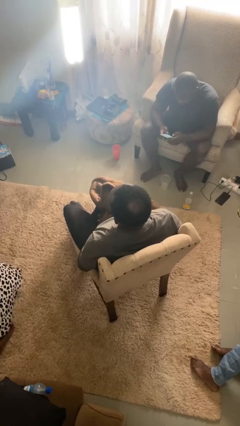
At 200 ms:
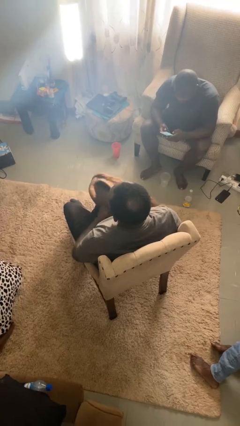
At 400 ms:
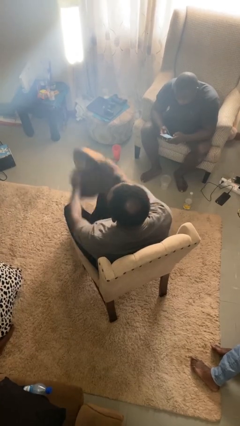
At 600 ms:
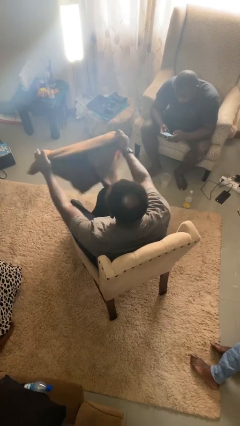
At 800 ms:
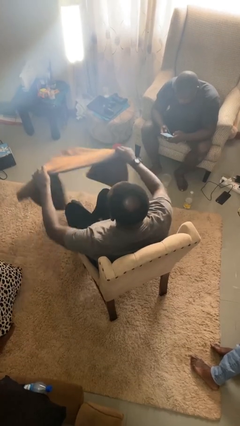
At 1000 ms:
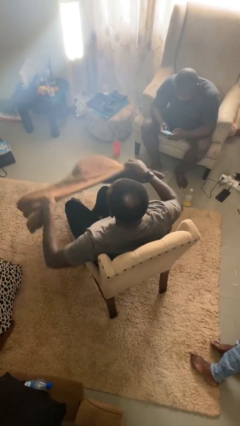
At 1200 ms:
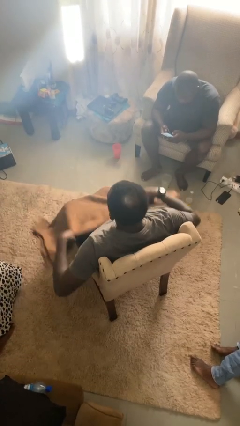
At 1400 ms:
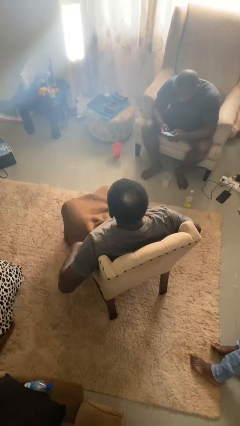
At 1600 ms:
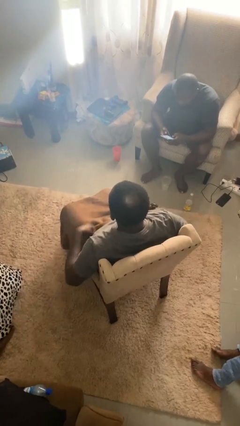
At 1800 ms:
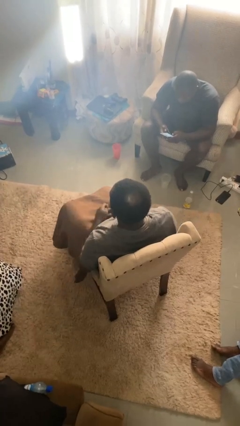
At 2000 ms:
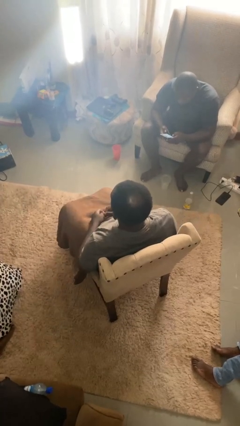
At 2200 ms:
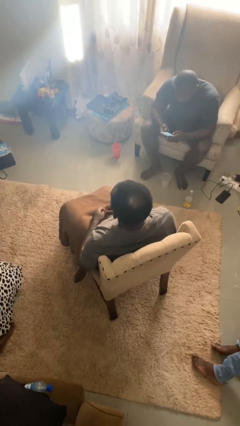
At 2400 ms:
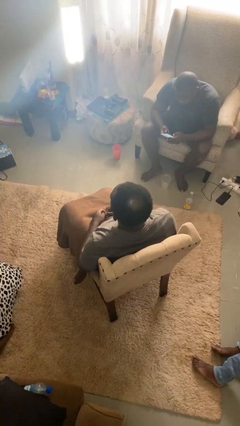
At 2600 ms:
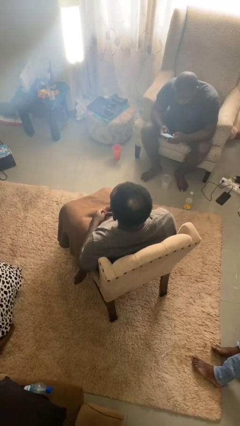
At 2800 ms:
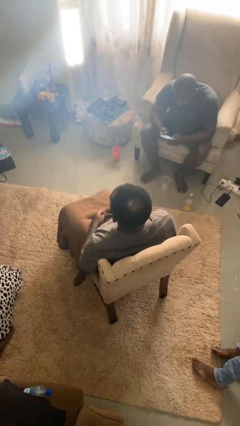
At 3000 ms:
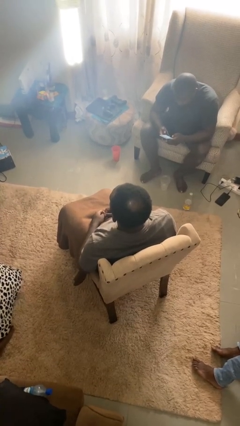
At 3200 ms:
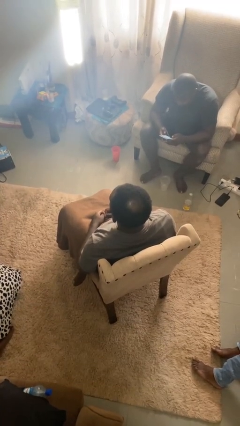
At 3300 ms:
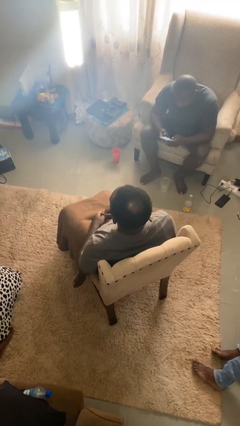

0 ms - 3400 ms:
person covers with blanket

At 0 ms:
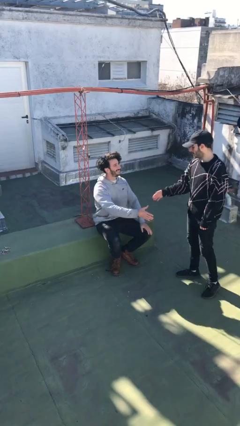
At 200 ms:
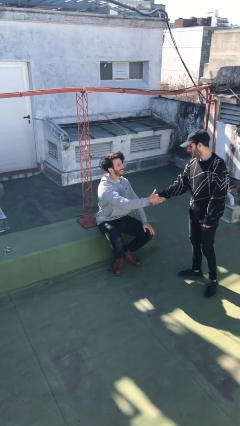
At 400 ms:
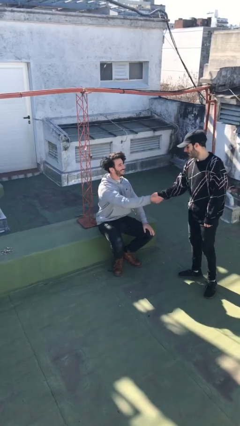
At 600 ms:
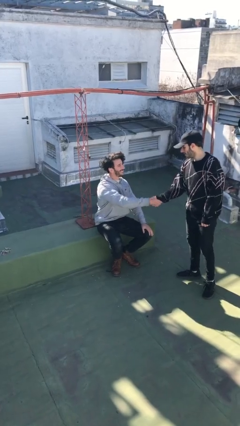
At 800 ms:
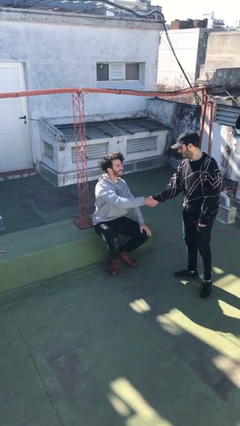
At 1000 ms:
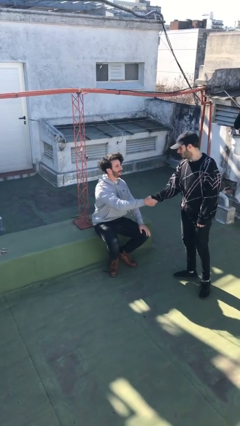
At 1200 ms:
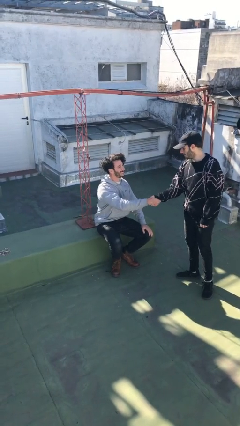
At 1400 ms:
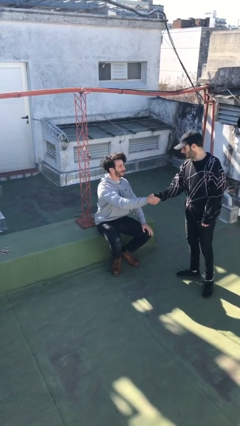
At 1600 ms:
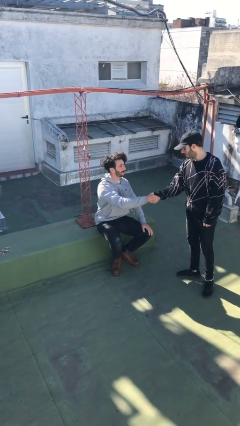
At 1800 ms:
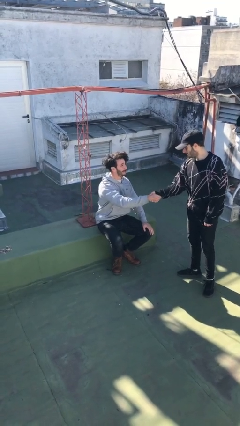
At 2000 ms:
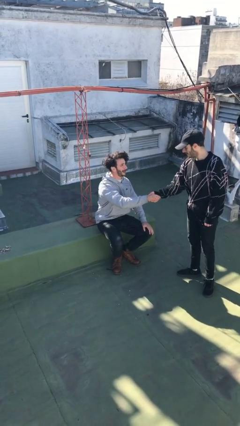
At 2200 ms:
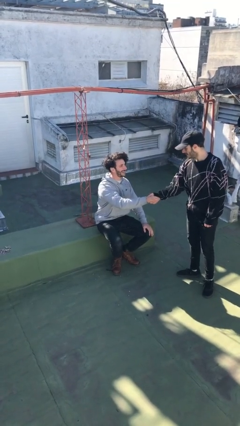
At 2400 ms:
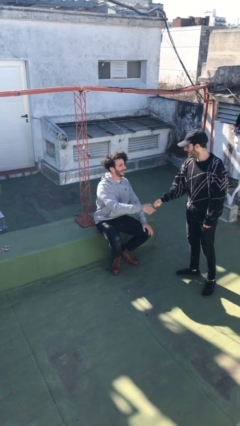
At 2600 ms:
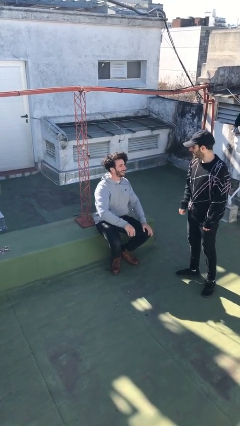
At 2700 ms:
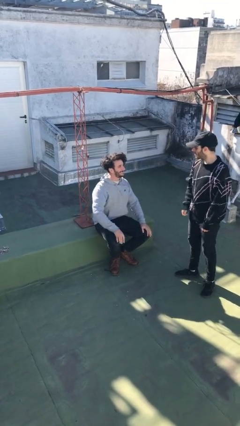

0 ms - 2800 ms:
person shakes hand

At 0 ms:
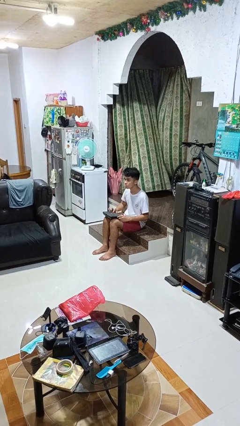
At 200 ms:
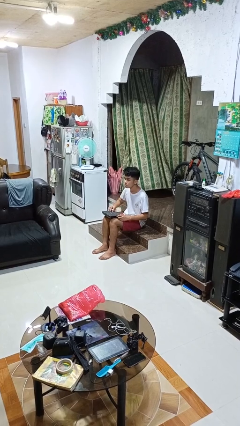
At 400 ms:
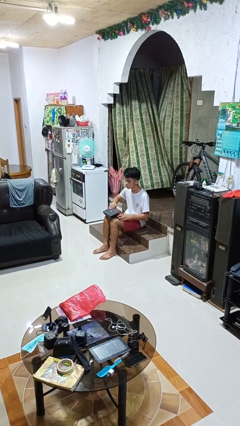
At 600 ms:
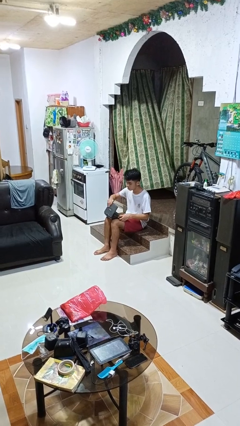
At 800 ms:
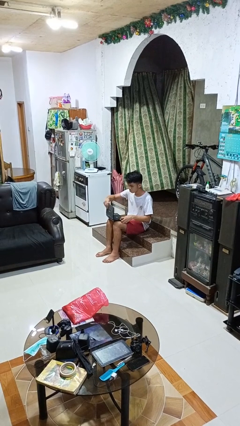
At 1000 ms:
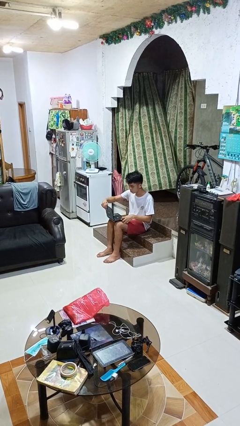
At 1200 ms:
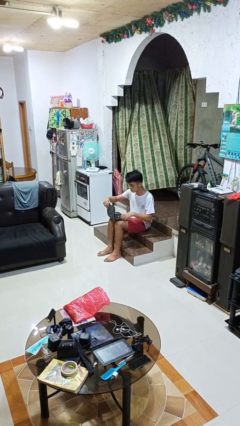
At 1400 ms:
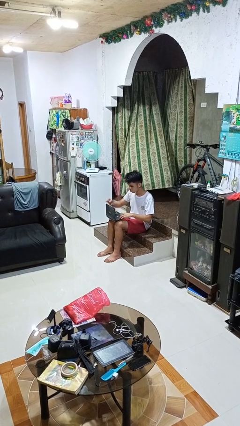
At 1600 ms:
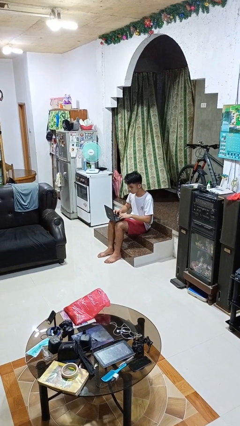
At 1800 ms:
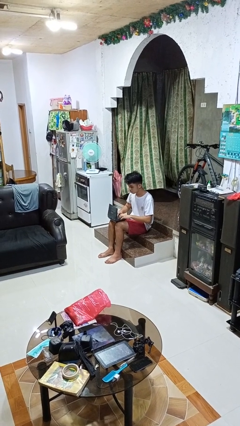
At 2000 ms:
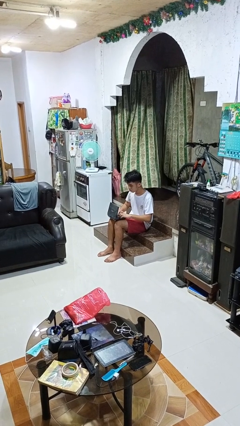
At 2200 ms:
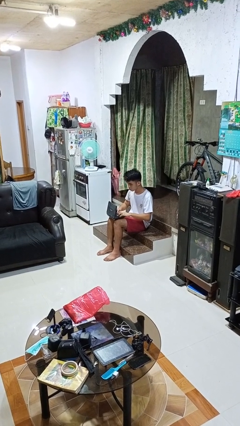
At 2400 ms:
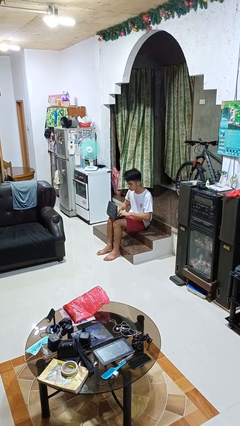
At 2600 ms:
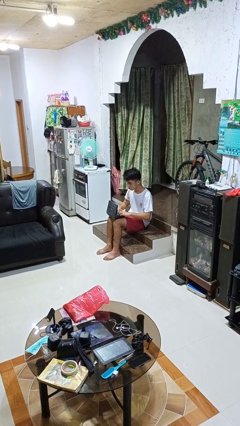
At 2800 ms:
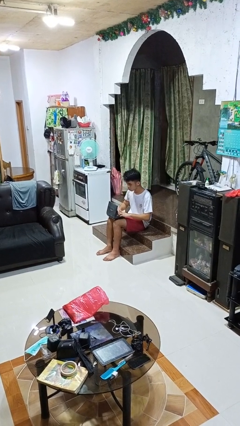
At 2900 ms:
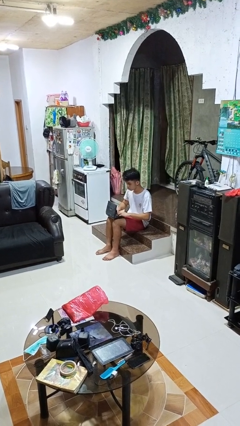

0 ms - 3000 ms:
person opens laptop

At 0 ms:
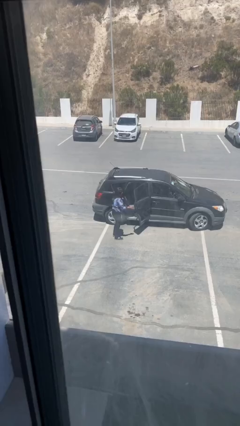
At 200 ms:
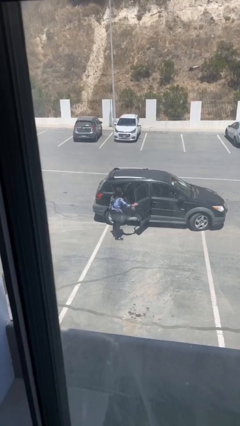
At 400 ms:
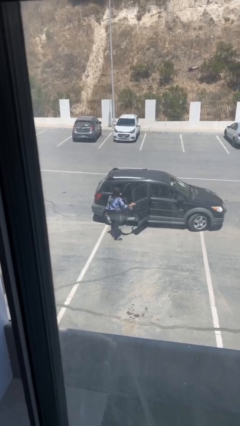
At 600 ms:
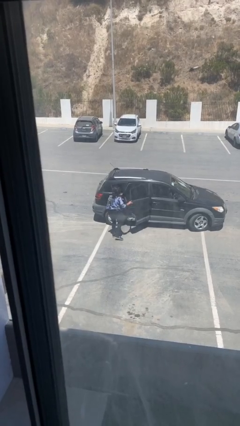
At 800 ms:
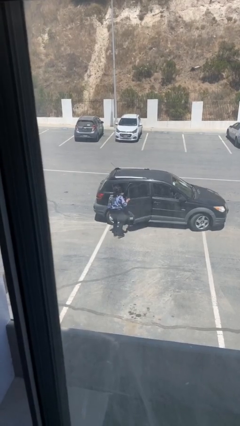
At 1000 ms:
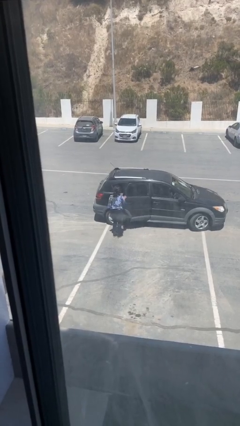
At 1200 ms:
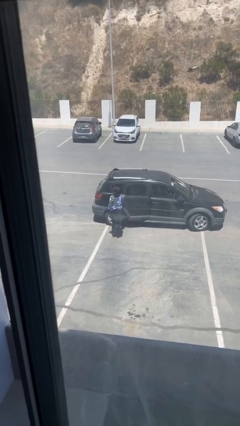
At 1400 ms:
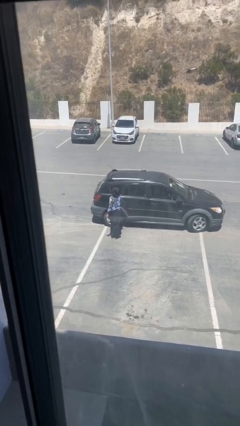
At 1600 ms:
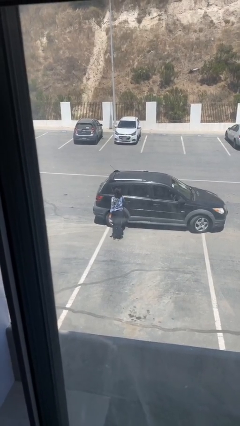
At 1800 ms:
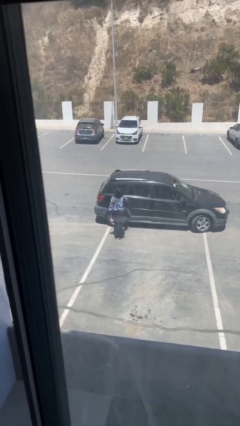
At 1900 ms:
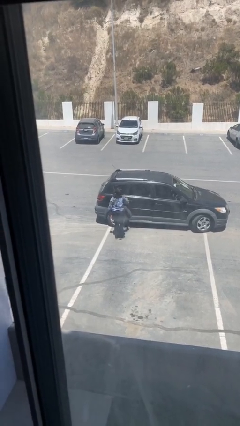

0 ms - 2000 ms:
person closes car door

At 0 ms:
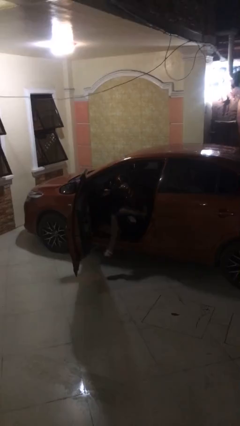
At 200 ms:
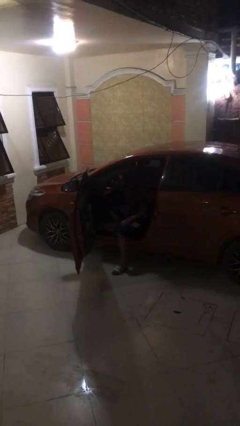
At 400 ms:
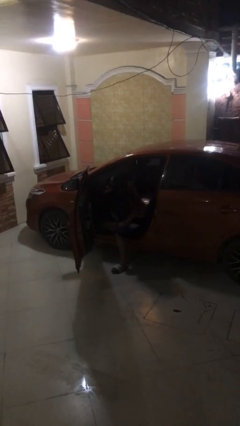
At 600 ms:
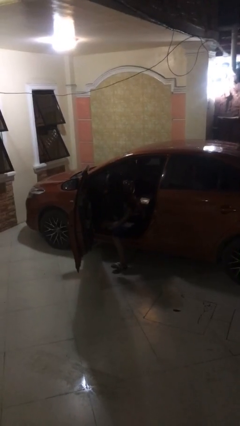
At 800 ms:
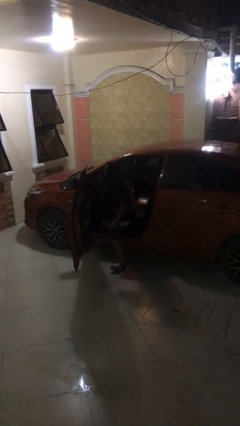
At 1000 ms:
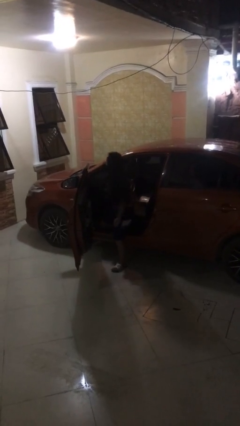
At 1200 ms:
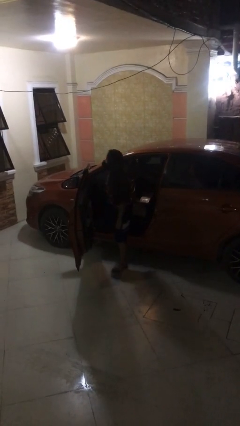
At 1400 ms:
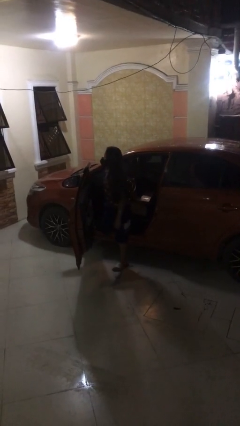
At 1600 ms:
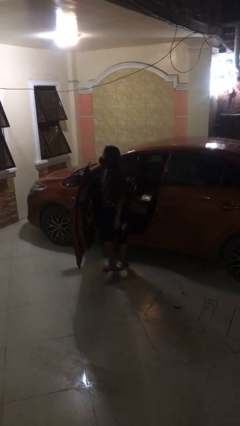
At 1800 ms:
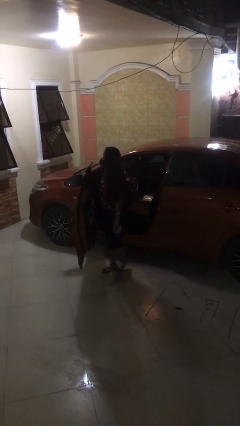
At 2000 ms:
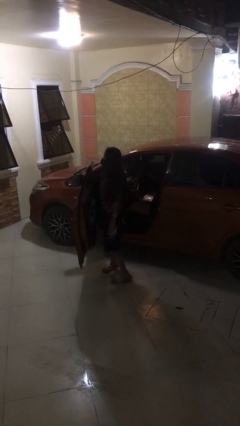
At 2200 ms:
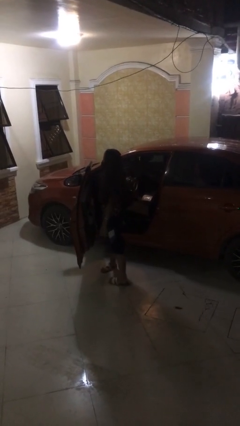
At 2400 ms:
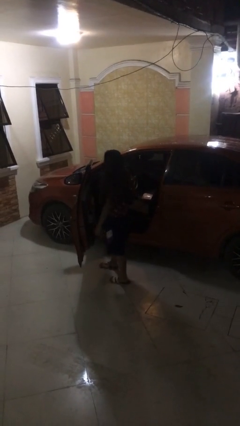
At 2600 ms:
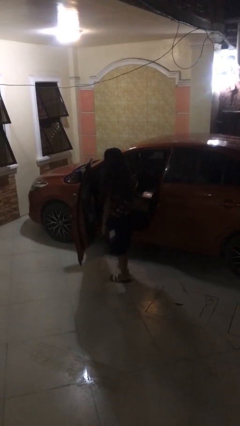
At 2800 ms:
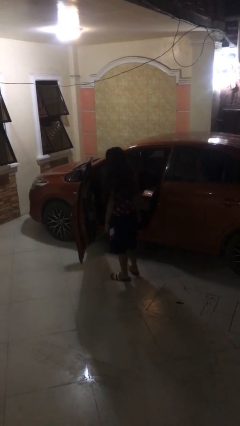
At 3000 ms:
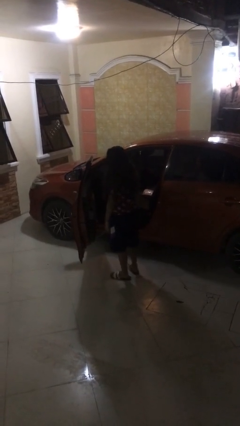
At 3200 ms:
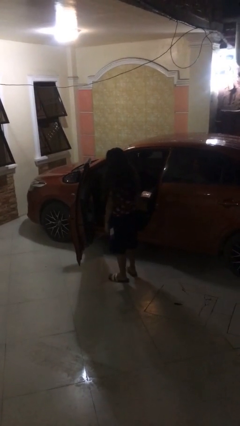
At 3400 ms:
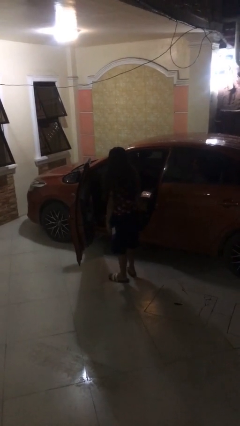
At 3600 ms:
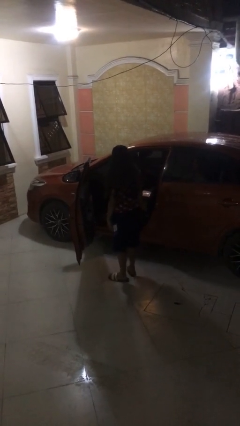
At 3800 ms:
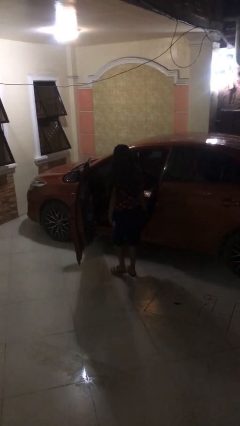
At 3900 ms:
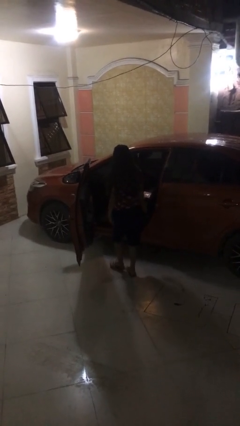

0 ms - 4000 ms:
person exits car

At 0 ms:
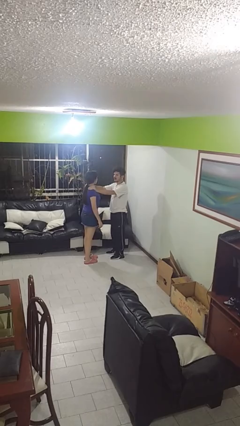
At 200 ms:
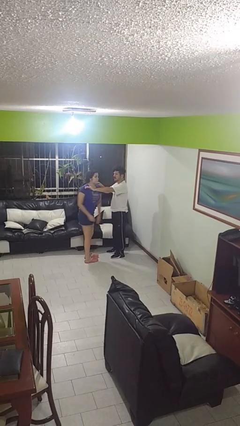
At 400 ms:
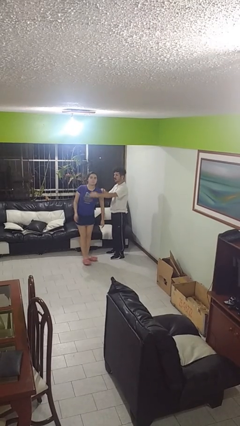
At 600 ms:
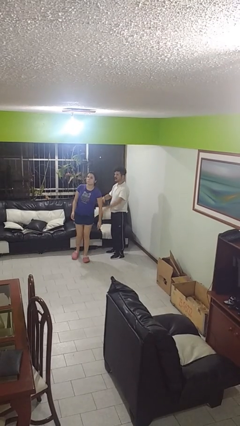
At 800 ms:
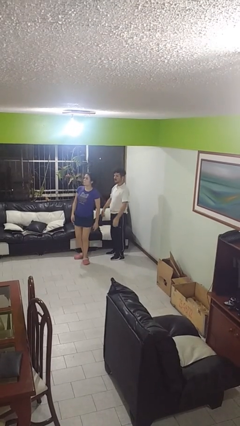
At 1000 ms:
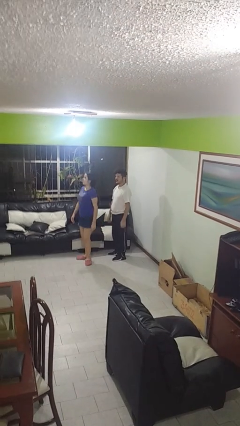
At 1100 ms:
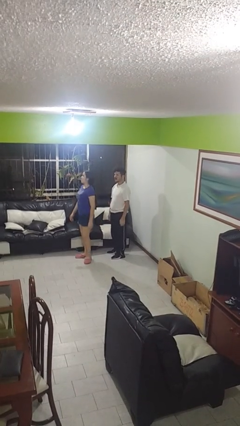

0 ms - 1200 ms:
person spins person around

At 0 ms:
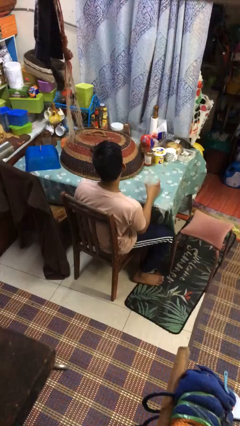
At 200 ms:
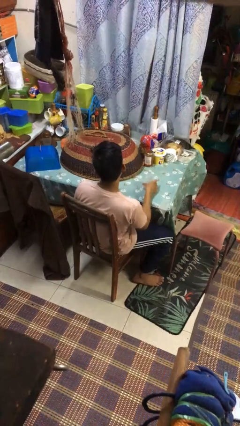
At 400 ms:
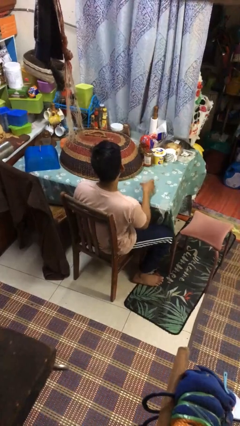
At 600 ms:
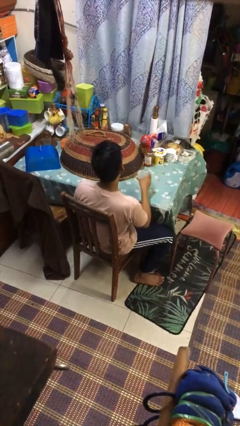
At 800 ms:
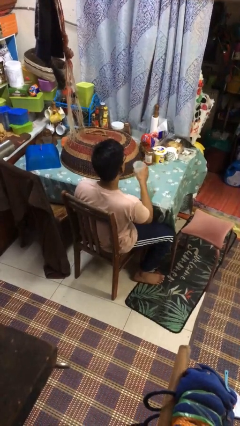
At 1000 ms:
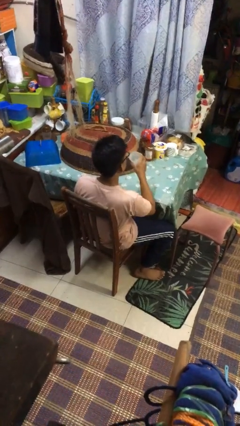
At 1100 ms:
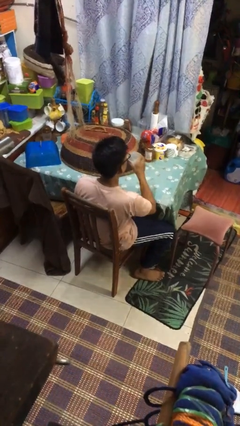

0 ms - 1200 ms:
person picks up object from table
